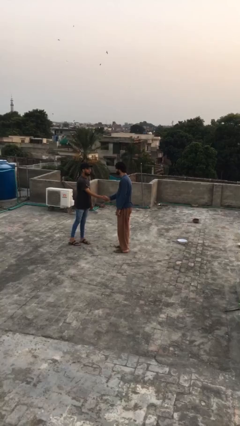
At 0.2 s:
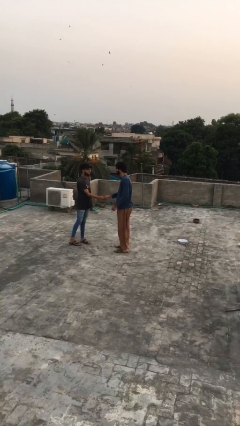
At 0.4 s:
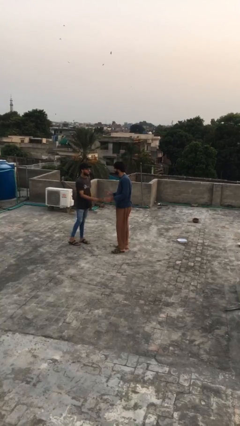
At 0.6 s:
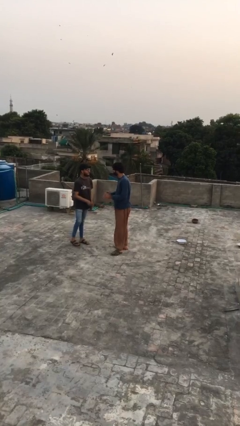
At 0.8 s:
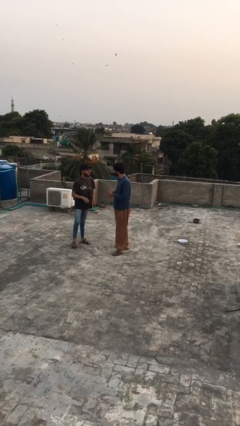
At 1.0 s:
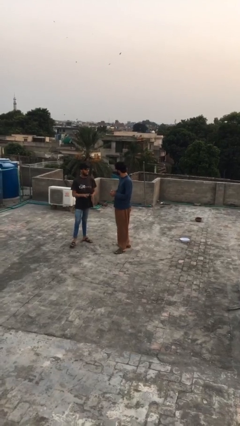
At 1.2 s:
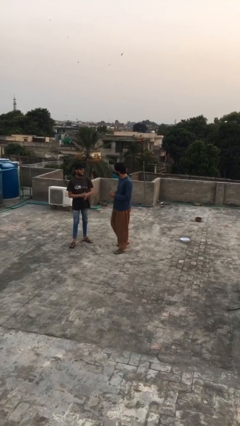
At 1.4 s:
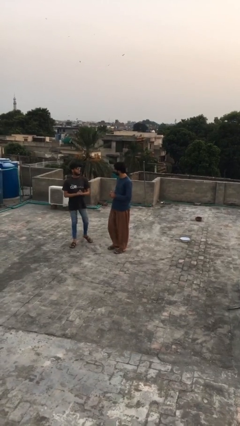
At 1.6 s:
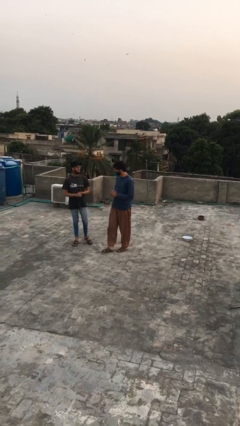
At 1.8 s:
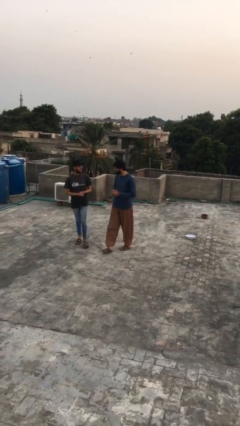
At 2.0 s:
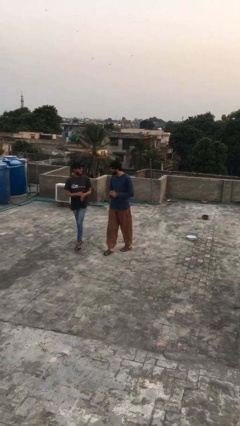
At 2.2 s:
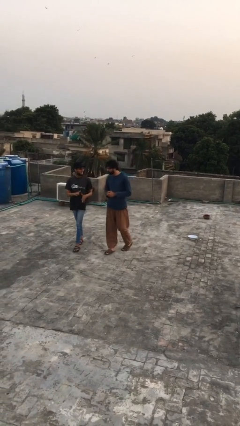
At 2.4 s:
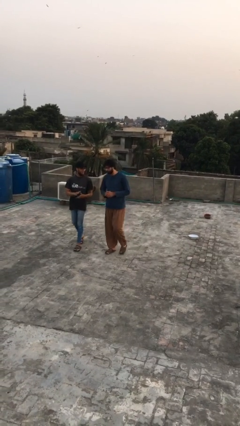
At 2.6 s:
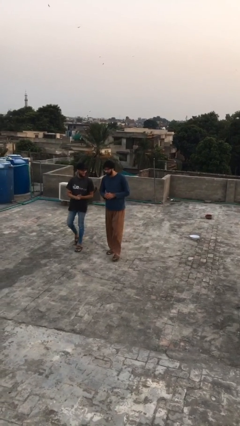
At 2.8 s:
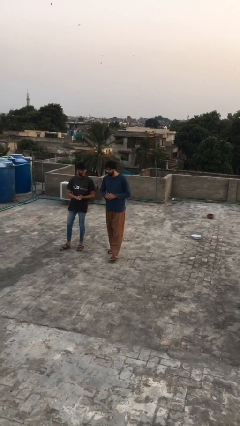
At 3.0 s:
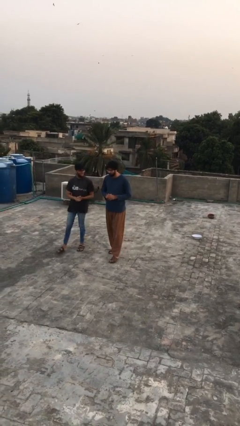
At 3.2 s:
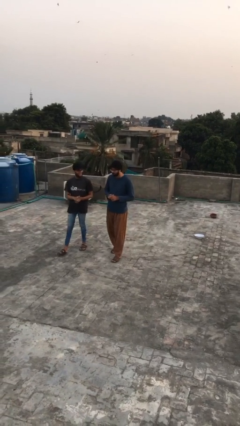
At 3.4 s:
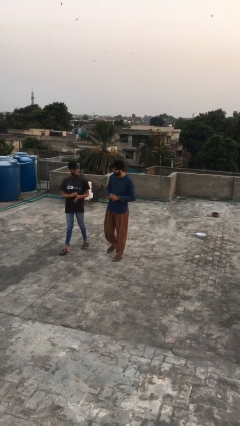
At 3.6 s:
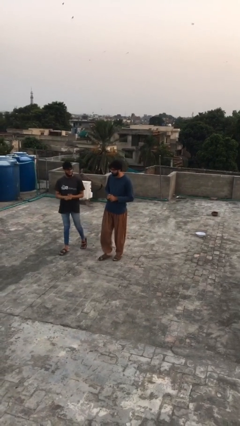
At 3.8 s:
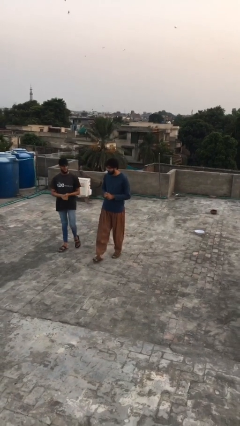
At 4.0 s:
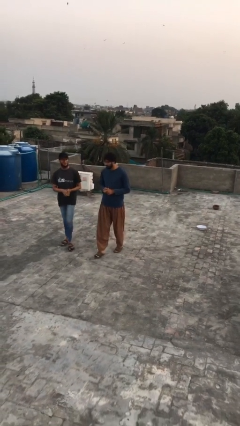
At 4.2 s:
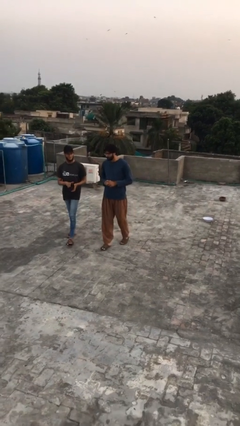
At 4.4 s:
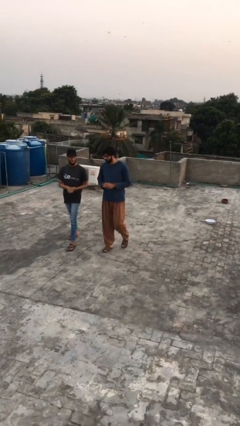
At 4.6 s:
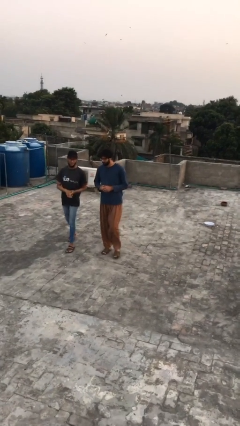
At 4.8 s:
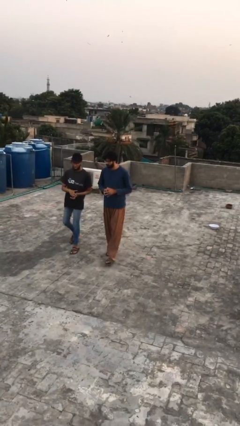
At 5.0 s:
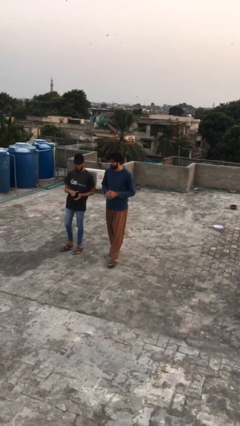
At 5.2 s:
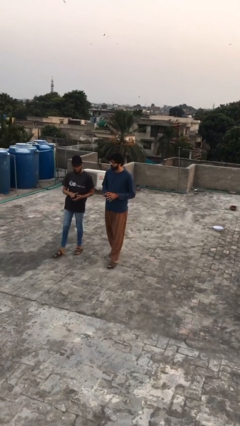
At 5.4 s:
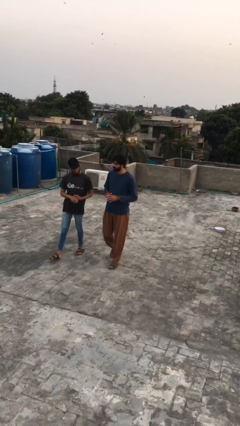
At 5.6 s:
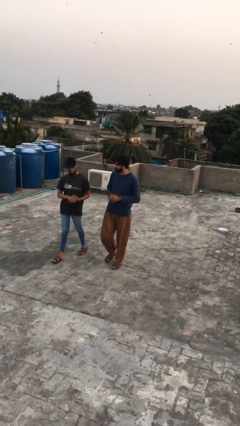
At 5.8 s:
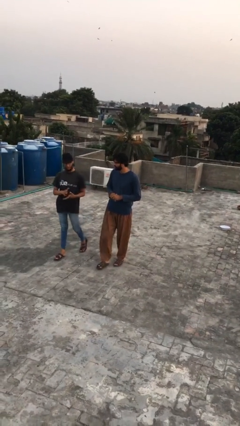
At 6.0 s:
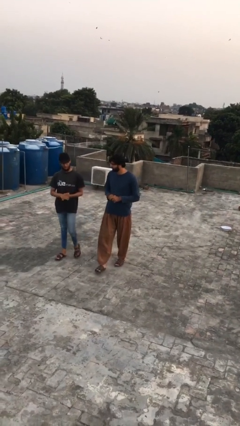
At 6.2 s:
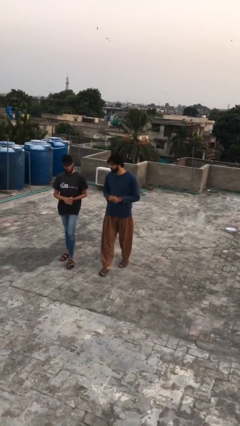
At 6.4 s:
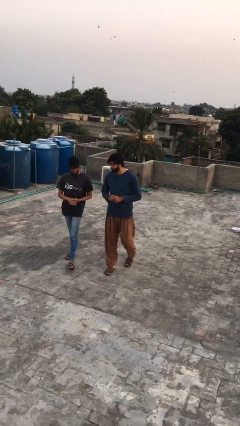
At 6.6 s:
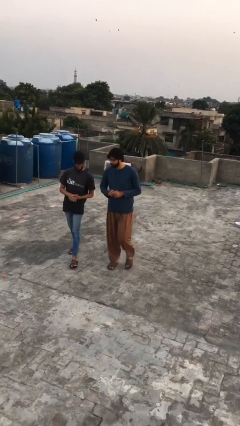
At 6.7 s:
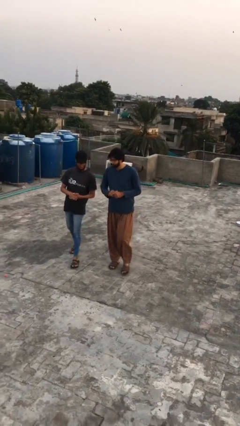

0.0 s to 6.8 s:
person talks to person

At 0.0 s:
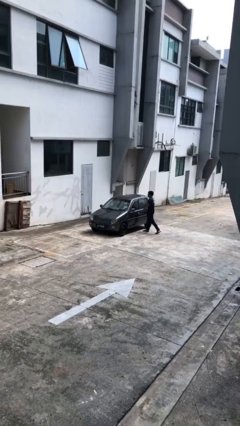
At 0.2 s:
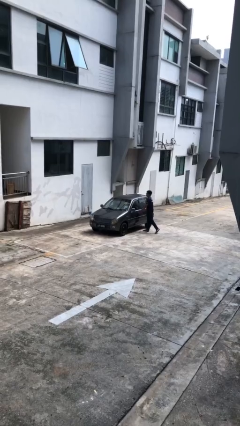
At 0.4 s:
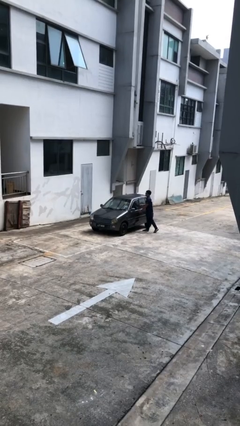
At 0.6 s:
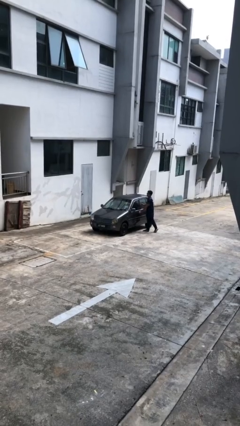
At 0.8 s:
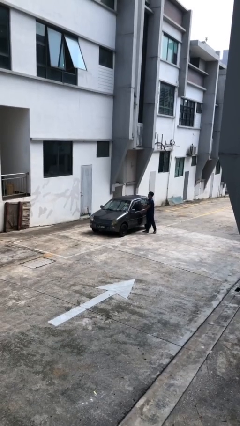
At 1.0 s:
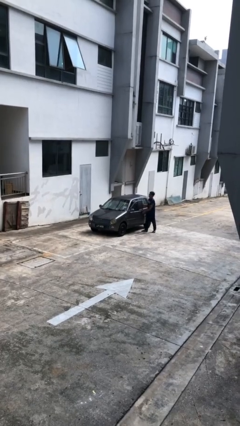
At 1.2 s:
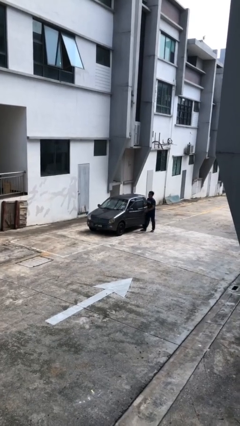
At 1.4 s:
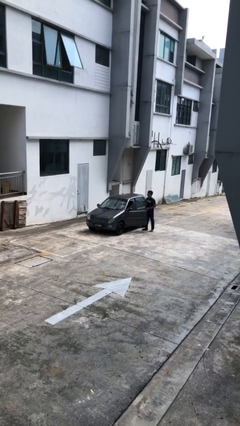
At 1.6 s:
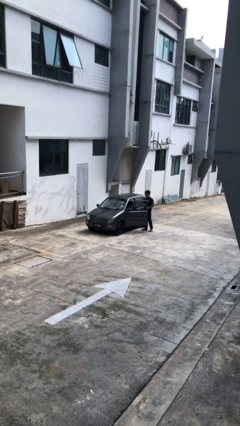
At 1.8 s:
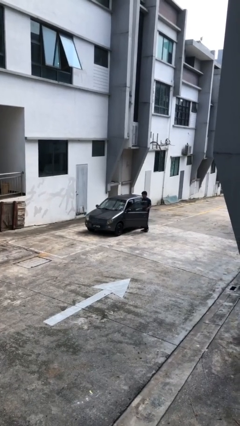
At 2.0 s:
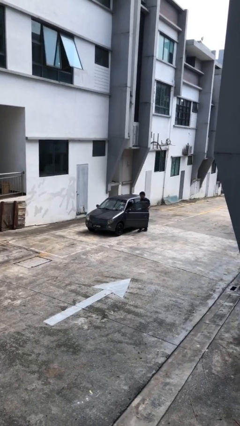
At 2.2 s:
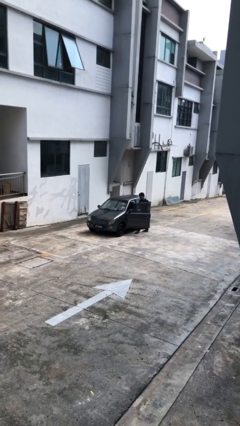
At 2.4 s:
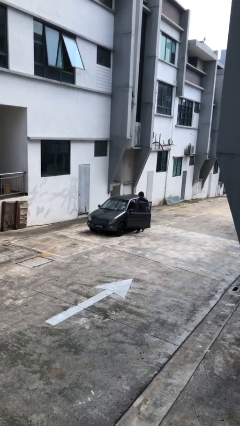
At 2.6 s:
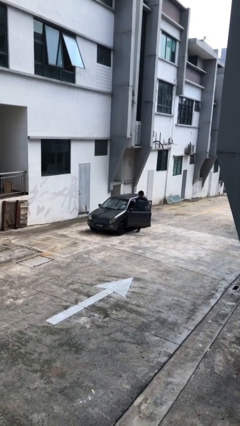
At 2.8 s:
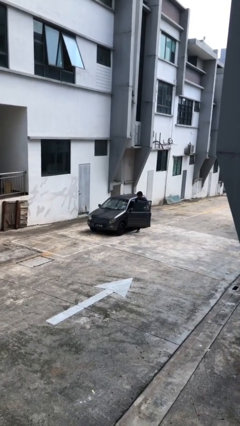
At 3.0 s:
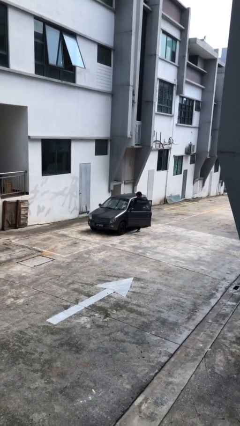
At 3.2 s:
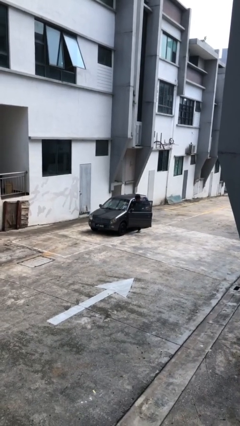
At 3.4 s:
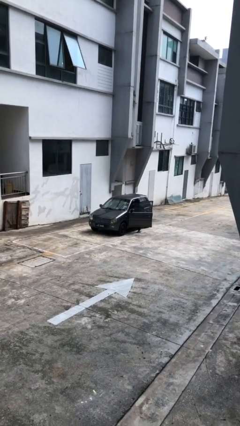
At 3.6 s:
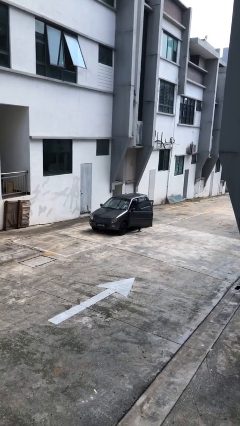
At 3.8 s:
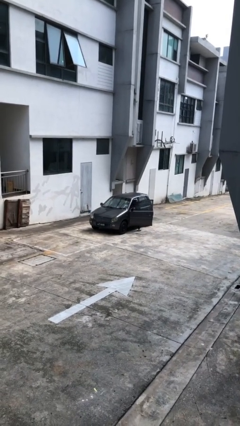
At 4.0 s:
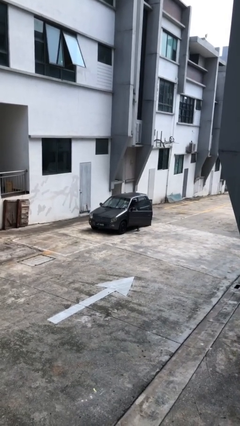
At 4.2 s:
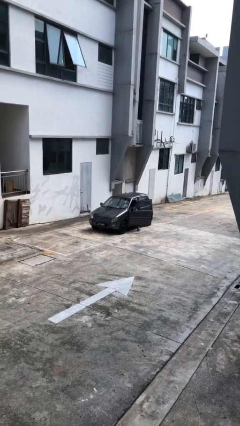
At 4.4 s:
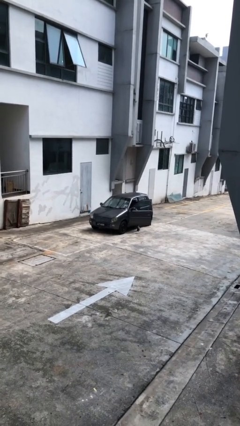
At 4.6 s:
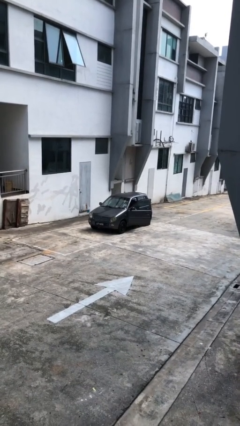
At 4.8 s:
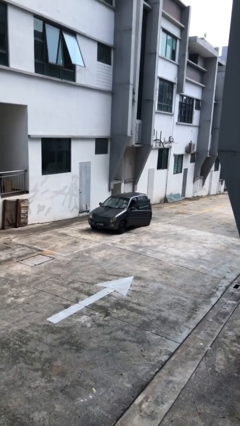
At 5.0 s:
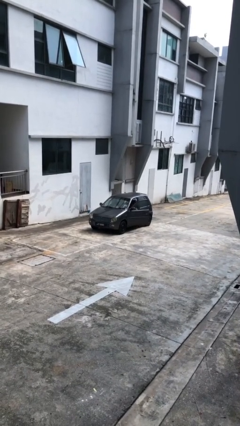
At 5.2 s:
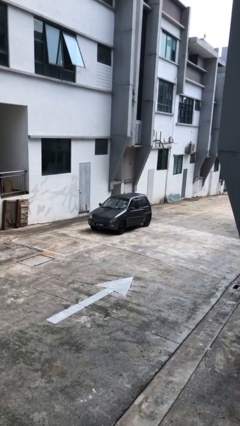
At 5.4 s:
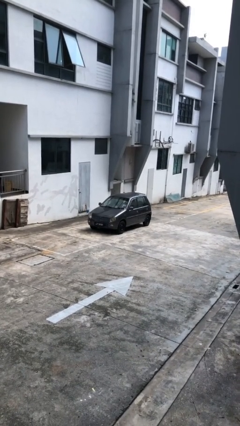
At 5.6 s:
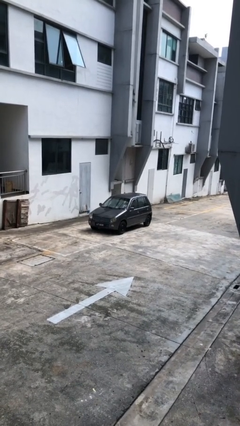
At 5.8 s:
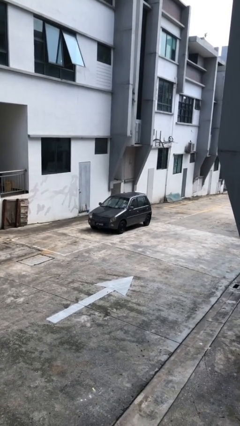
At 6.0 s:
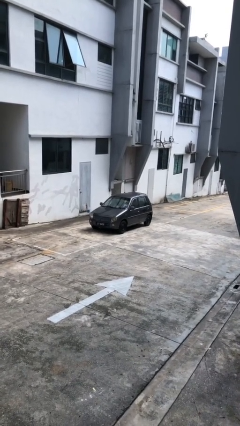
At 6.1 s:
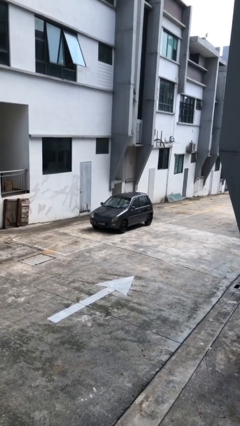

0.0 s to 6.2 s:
car picks up person

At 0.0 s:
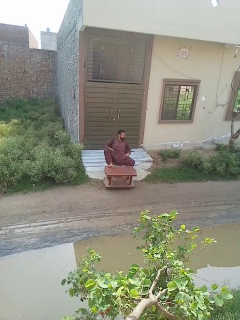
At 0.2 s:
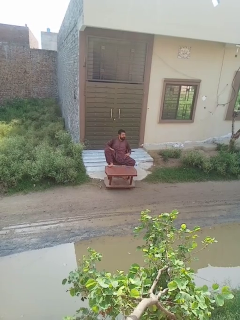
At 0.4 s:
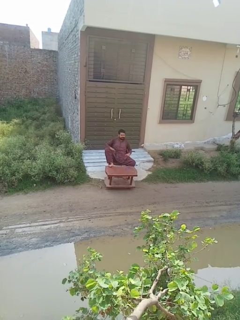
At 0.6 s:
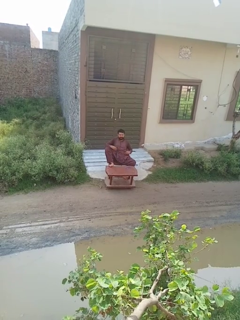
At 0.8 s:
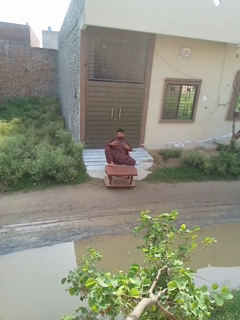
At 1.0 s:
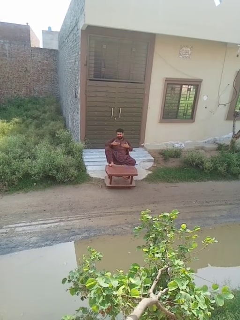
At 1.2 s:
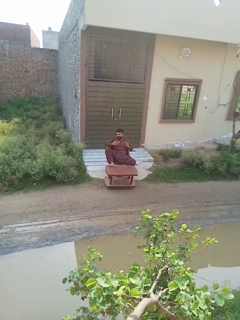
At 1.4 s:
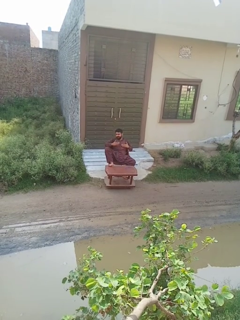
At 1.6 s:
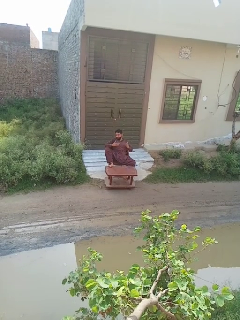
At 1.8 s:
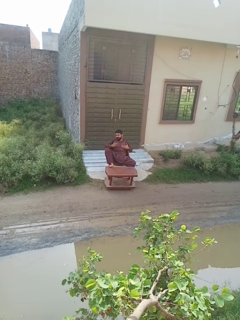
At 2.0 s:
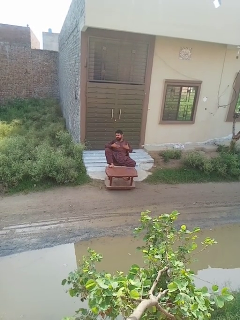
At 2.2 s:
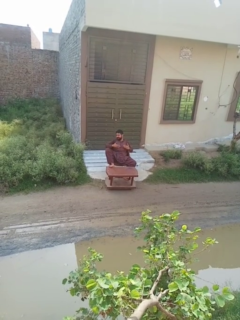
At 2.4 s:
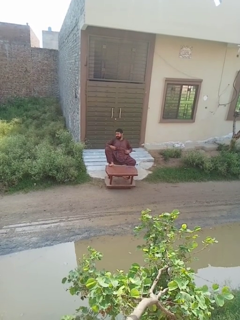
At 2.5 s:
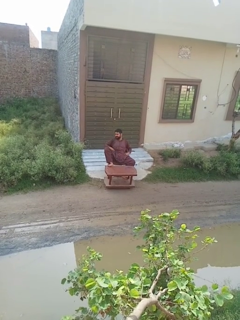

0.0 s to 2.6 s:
person drums on chest

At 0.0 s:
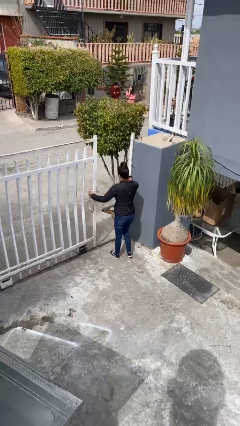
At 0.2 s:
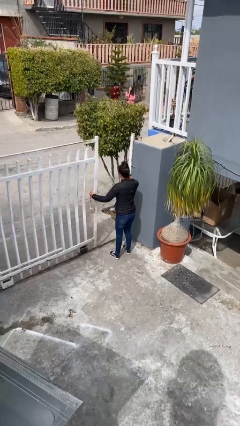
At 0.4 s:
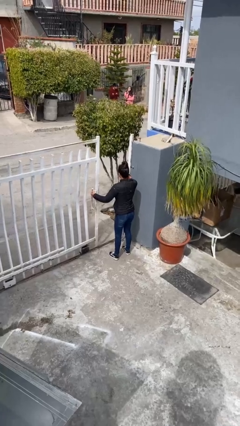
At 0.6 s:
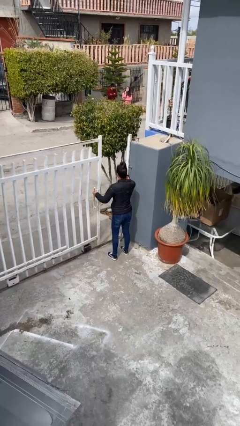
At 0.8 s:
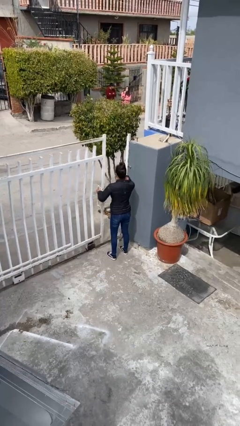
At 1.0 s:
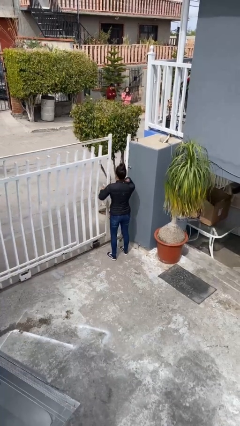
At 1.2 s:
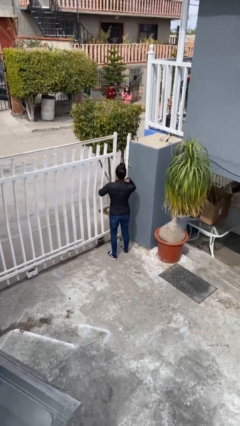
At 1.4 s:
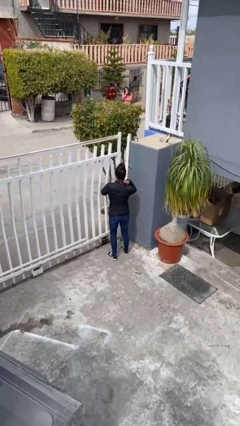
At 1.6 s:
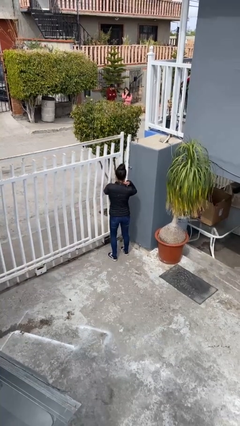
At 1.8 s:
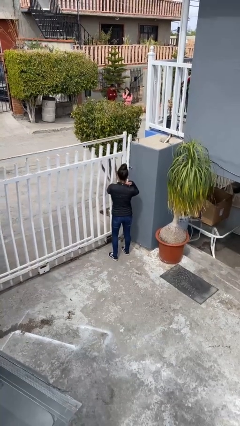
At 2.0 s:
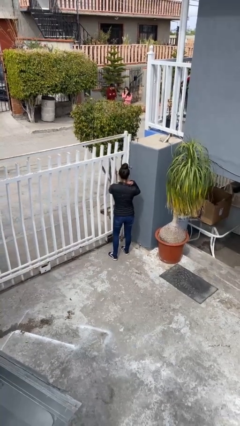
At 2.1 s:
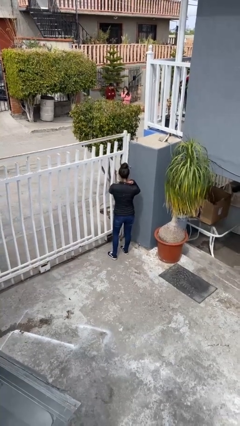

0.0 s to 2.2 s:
person closes facility door

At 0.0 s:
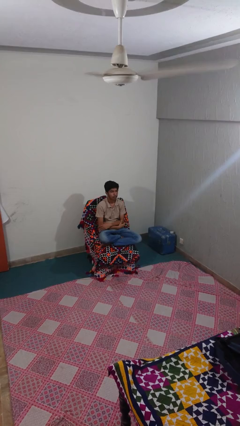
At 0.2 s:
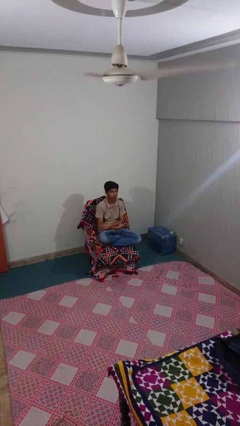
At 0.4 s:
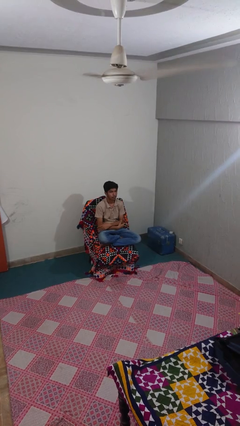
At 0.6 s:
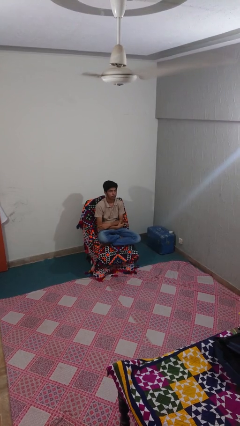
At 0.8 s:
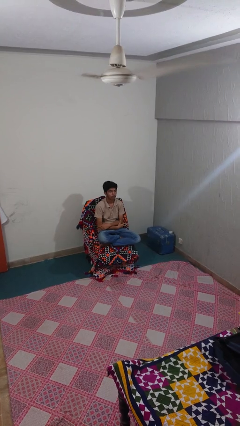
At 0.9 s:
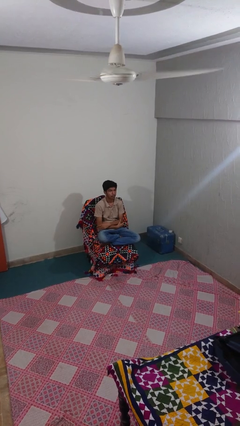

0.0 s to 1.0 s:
person gestures come here
